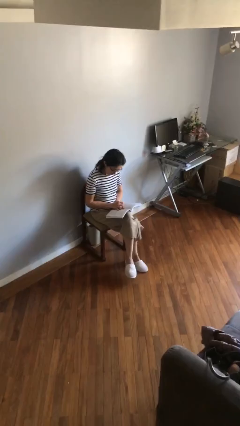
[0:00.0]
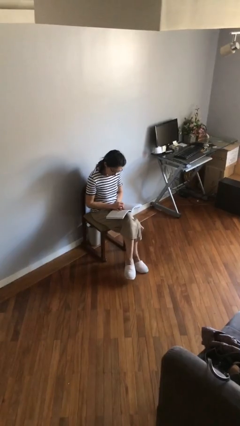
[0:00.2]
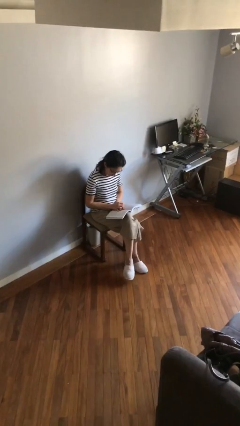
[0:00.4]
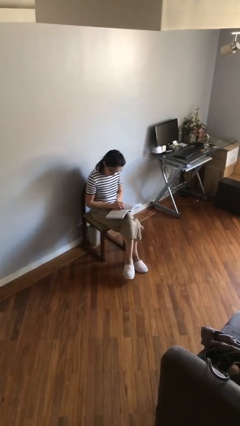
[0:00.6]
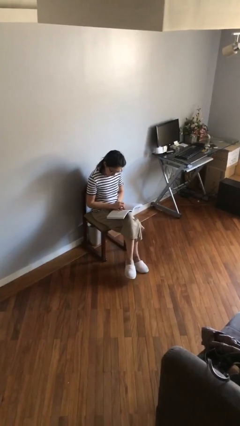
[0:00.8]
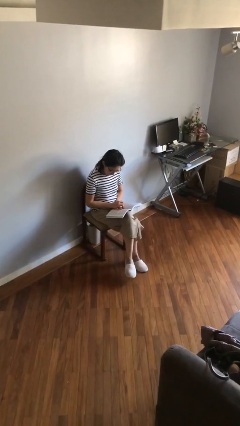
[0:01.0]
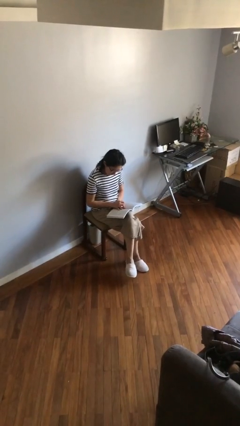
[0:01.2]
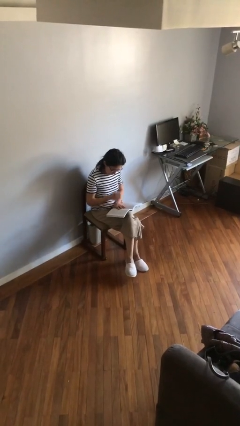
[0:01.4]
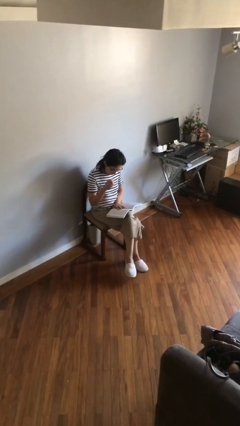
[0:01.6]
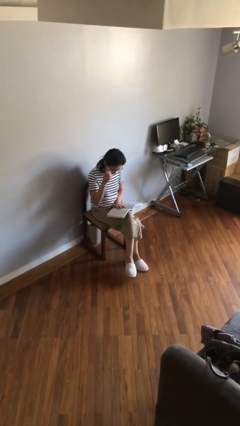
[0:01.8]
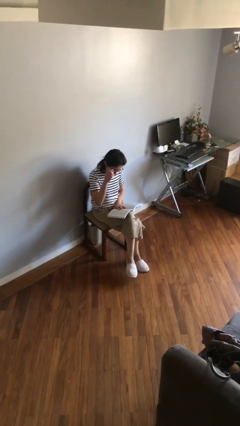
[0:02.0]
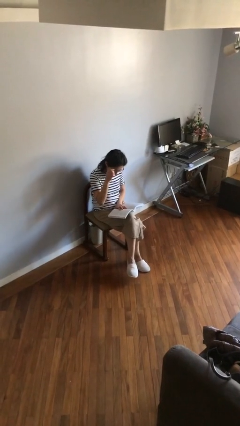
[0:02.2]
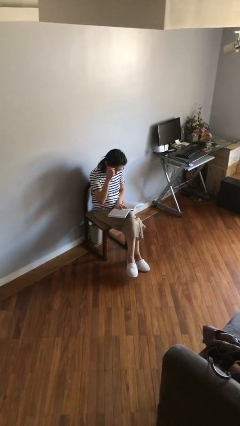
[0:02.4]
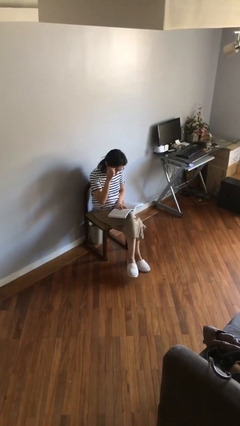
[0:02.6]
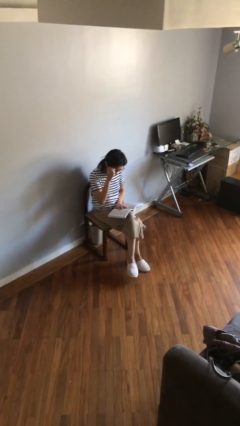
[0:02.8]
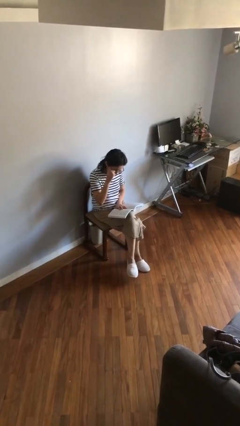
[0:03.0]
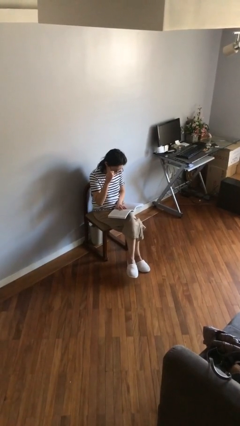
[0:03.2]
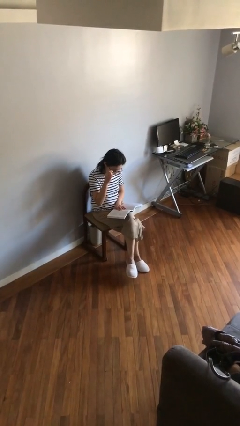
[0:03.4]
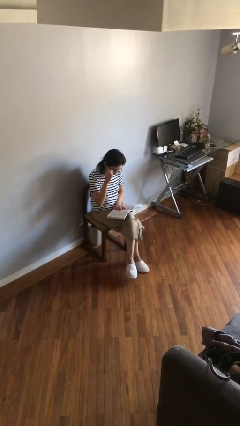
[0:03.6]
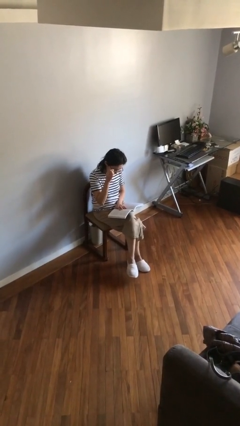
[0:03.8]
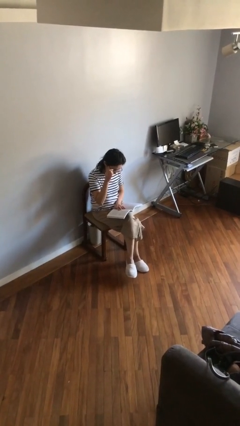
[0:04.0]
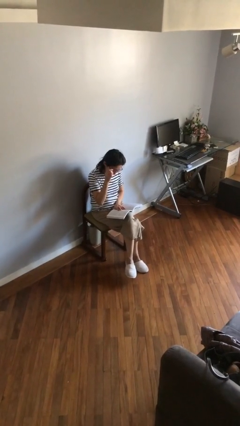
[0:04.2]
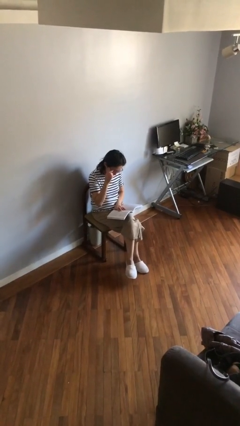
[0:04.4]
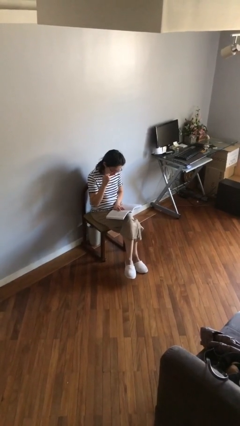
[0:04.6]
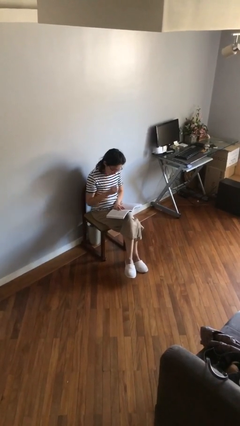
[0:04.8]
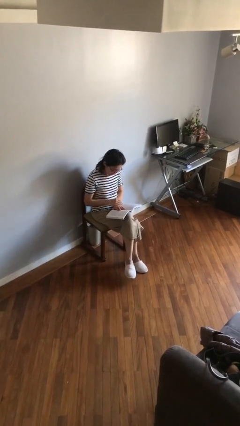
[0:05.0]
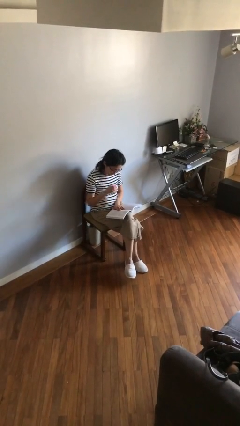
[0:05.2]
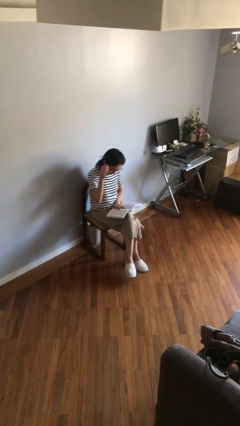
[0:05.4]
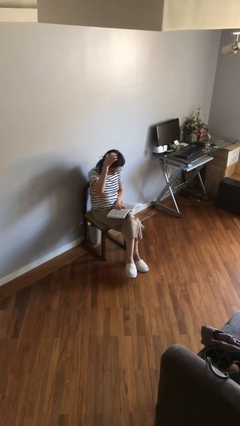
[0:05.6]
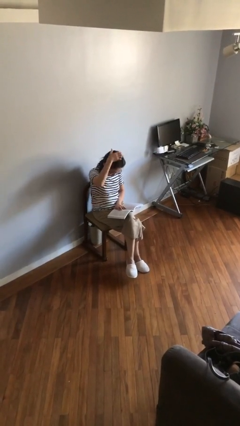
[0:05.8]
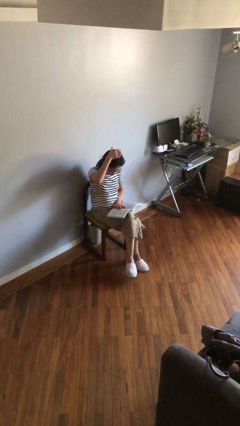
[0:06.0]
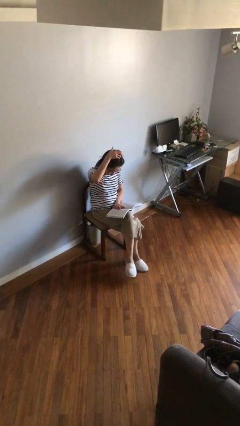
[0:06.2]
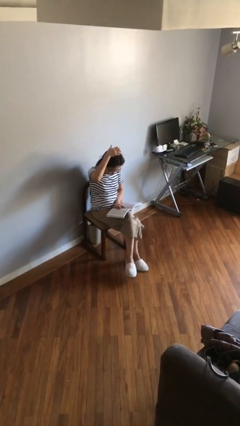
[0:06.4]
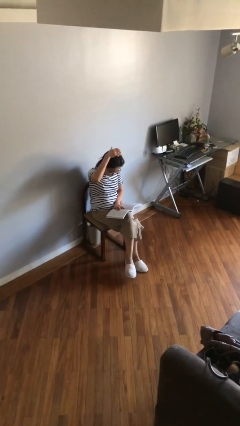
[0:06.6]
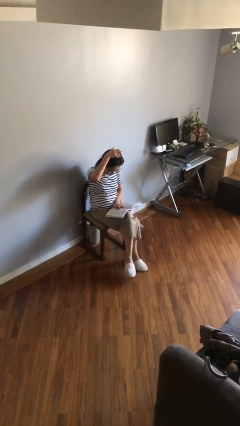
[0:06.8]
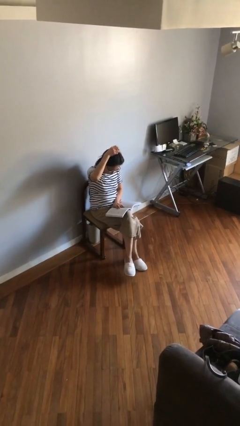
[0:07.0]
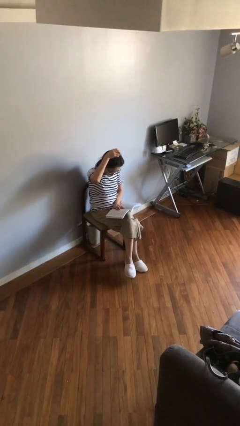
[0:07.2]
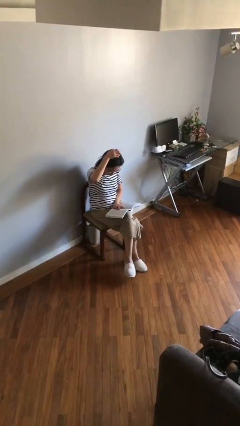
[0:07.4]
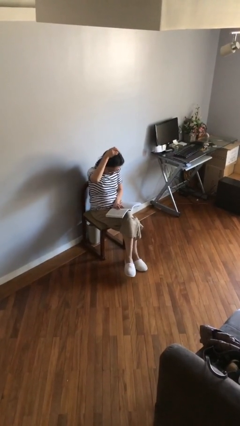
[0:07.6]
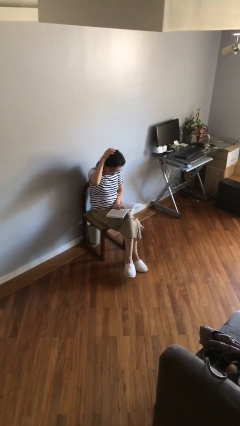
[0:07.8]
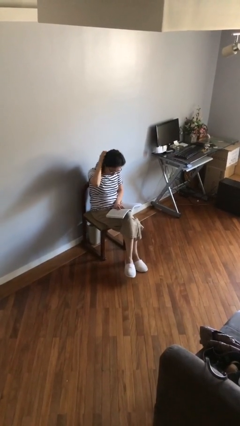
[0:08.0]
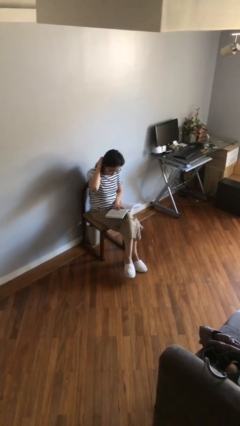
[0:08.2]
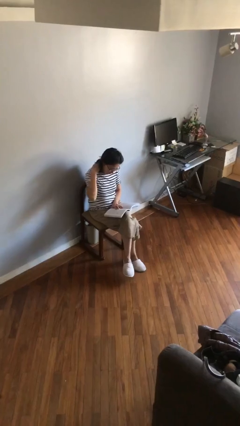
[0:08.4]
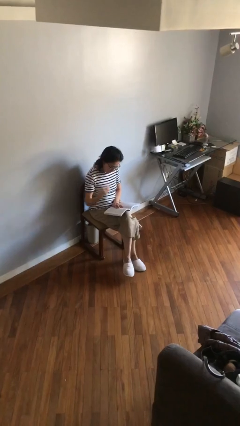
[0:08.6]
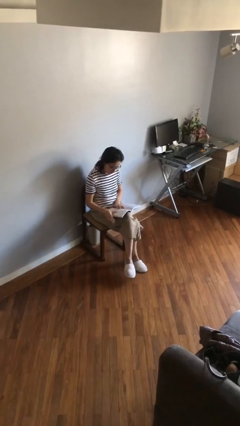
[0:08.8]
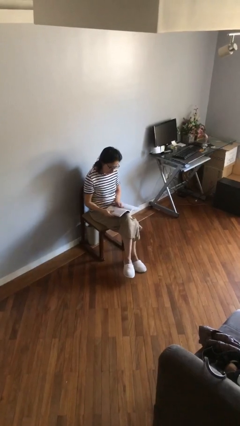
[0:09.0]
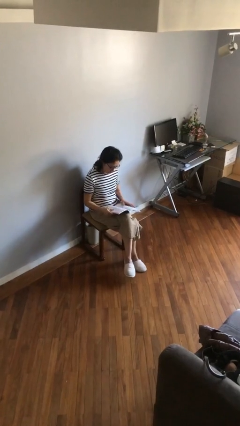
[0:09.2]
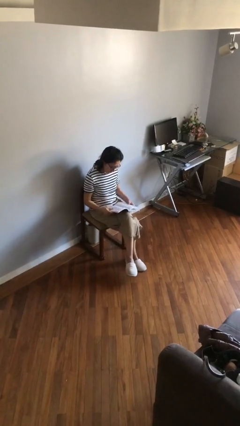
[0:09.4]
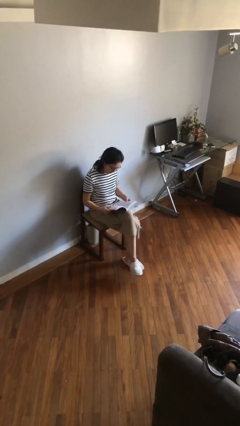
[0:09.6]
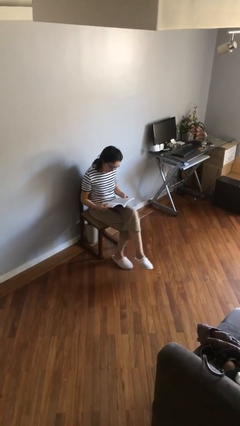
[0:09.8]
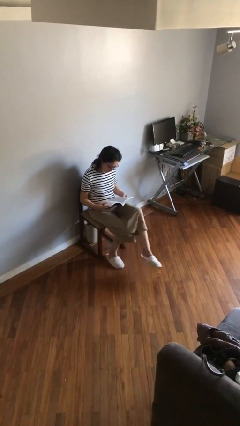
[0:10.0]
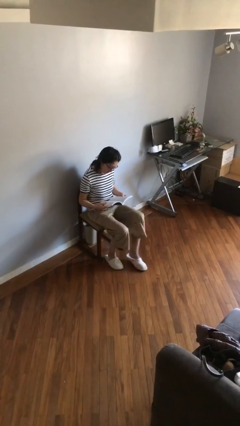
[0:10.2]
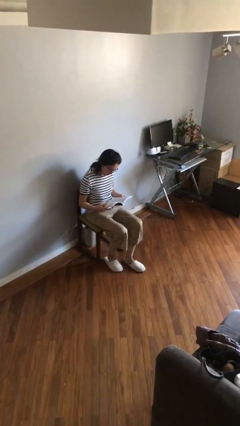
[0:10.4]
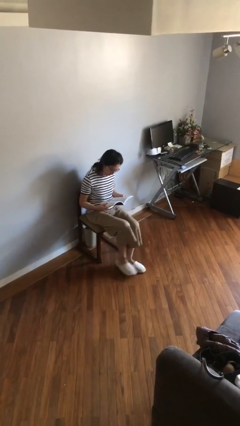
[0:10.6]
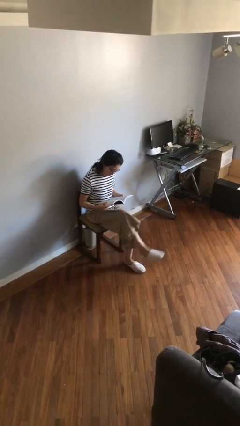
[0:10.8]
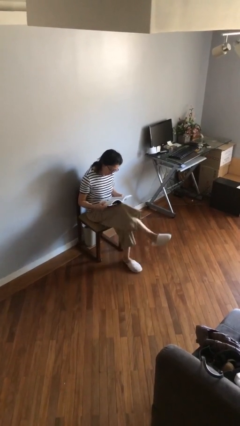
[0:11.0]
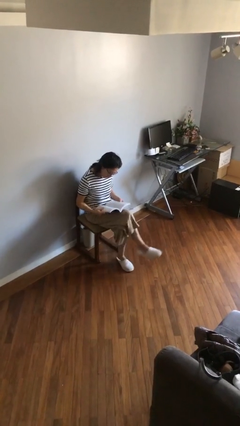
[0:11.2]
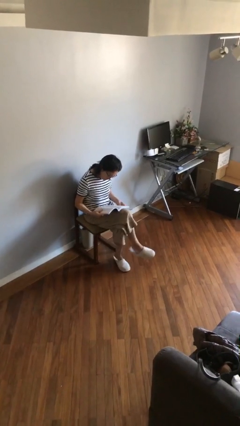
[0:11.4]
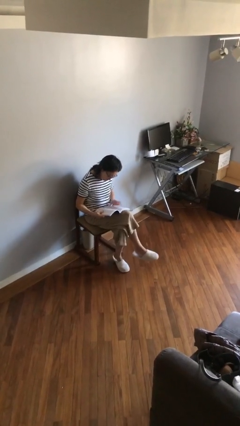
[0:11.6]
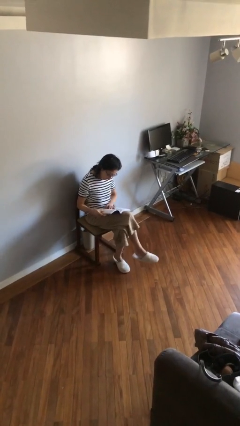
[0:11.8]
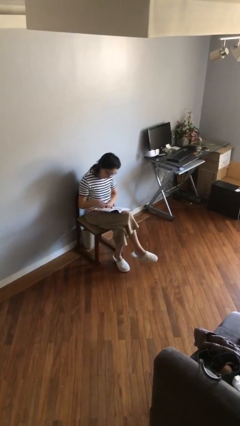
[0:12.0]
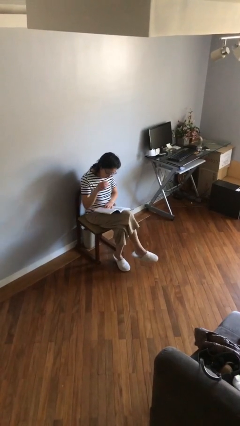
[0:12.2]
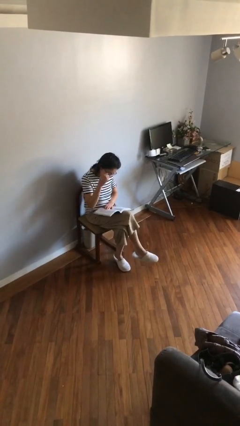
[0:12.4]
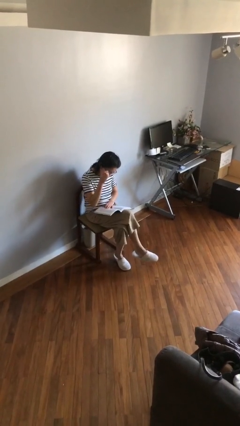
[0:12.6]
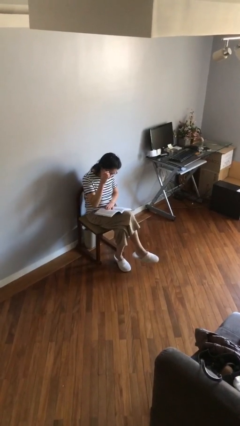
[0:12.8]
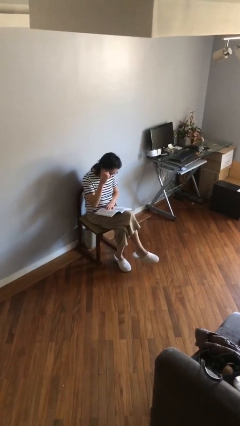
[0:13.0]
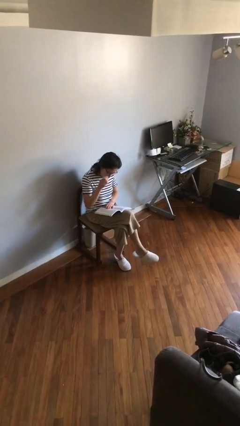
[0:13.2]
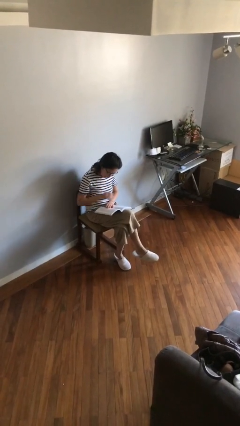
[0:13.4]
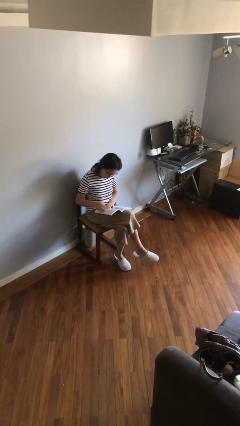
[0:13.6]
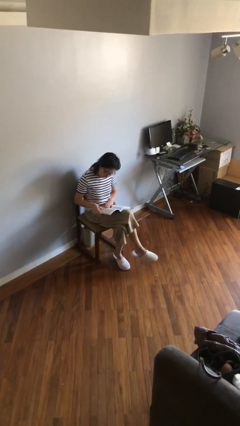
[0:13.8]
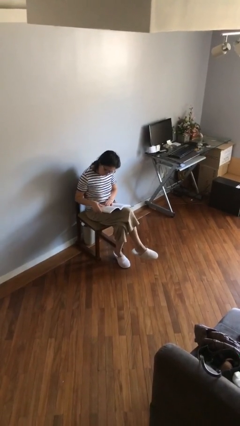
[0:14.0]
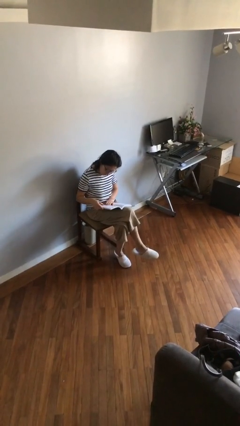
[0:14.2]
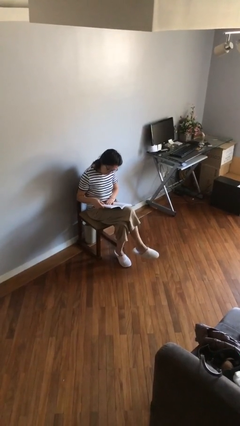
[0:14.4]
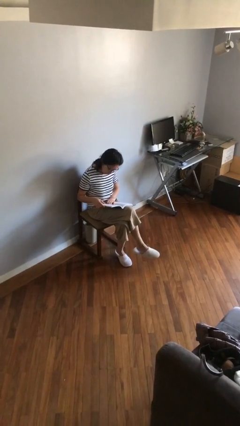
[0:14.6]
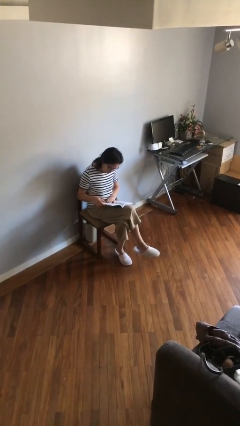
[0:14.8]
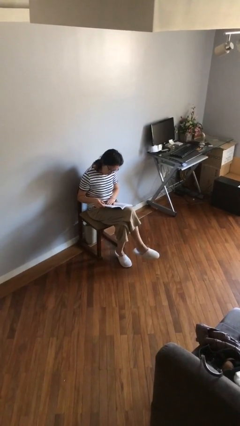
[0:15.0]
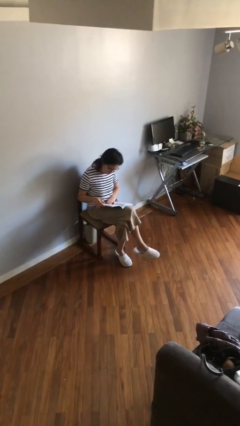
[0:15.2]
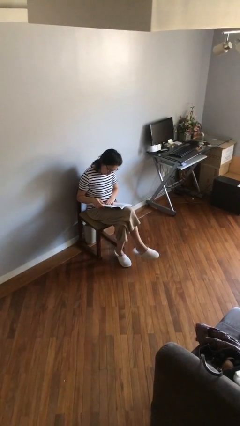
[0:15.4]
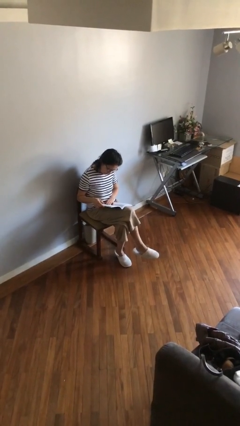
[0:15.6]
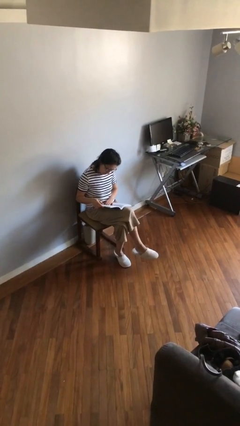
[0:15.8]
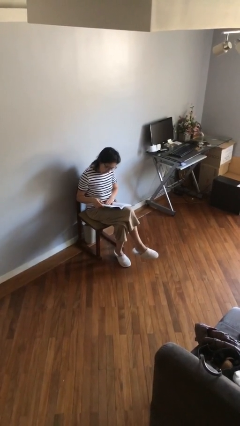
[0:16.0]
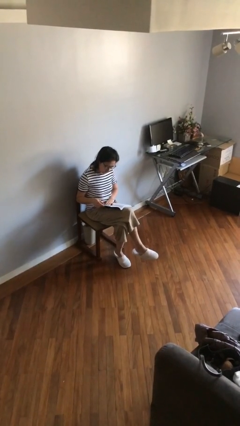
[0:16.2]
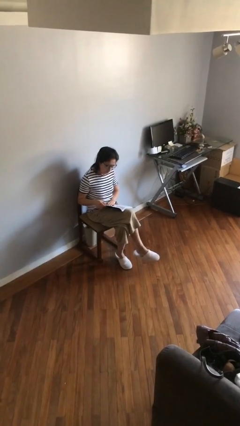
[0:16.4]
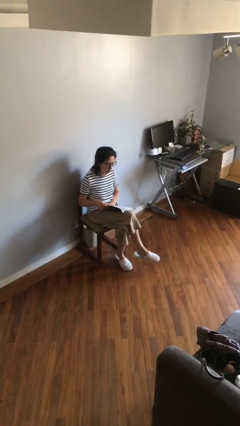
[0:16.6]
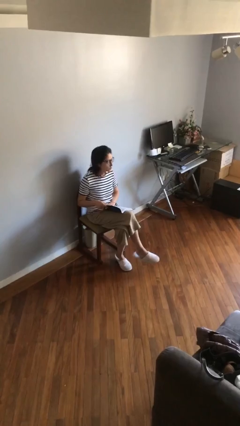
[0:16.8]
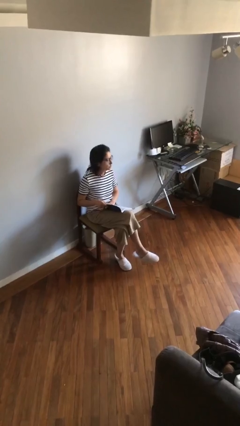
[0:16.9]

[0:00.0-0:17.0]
person reads document

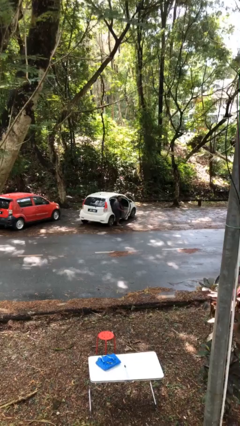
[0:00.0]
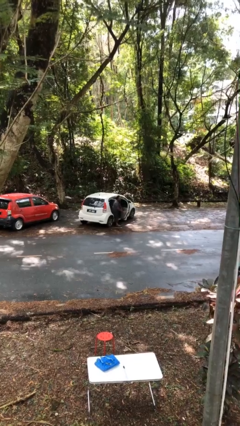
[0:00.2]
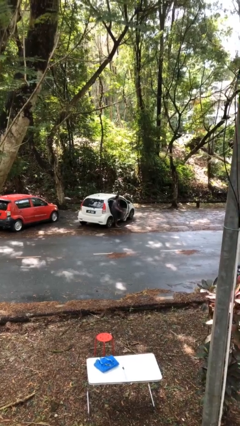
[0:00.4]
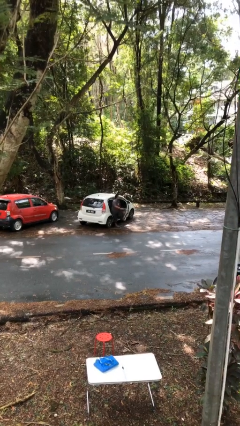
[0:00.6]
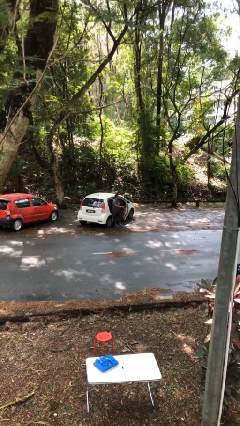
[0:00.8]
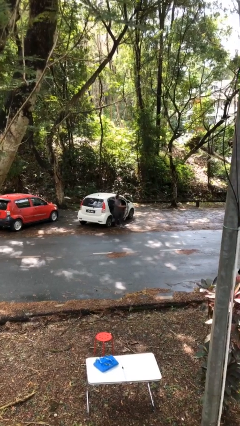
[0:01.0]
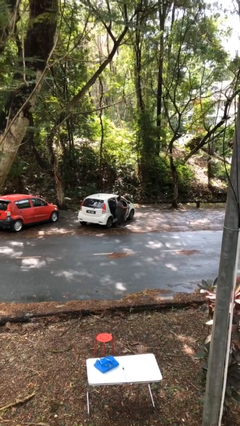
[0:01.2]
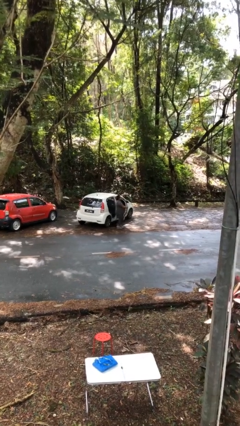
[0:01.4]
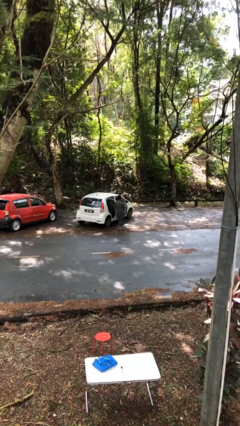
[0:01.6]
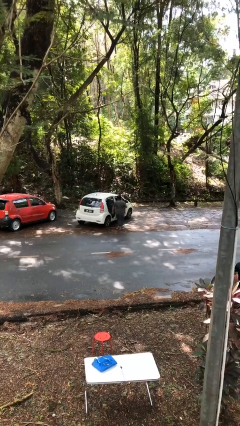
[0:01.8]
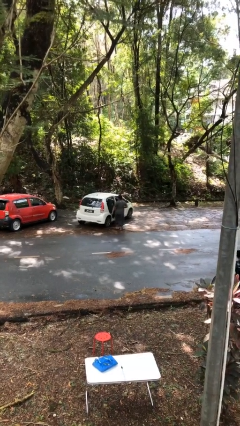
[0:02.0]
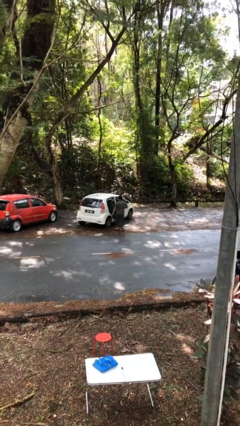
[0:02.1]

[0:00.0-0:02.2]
person exits car
